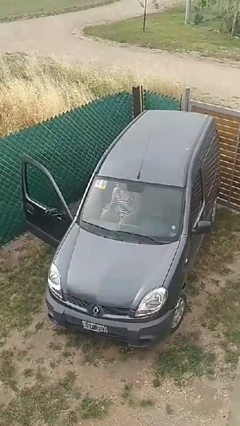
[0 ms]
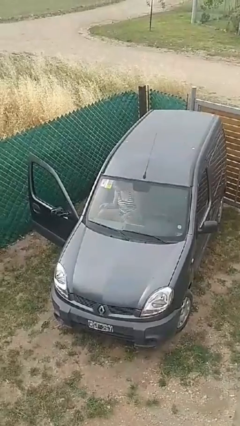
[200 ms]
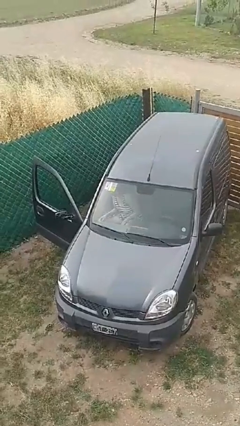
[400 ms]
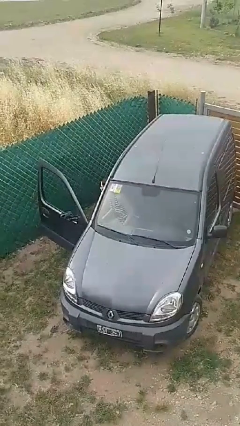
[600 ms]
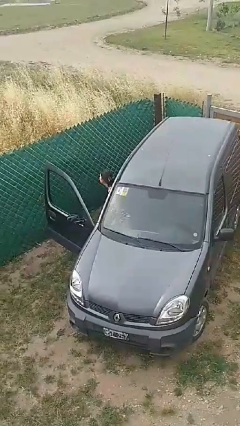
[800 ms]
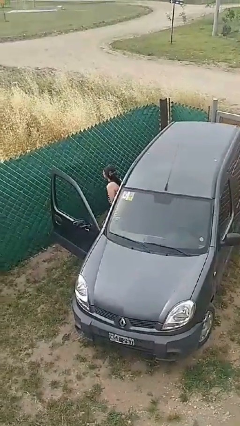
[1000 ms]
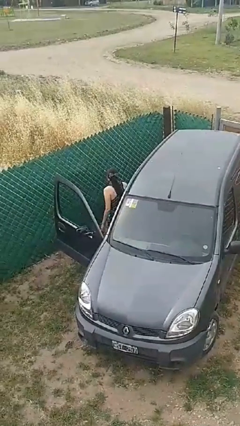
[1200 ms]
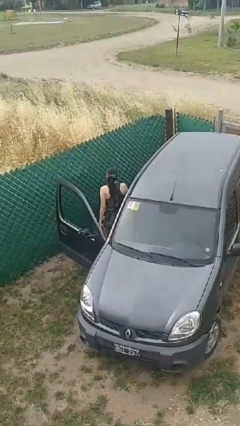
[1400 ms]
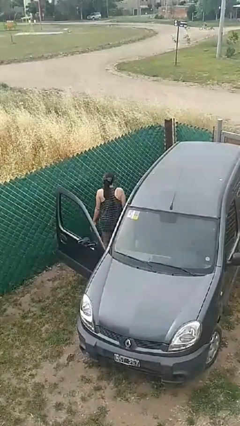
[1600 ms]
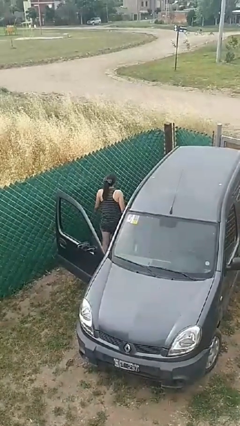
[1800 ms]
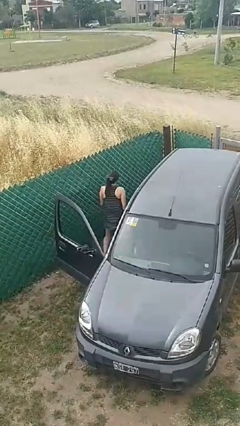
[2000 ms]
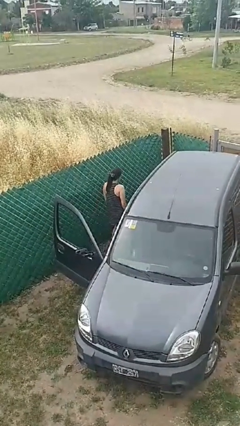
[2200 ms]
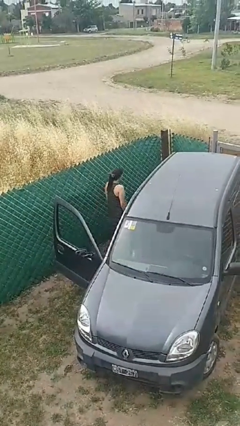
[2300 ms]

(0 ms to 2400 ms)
person exits car

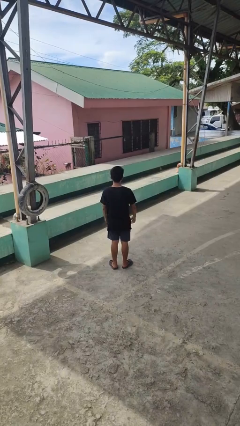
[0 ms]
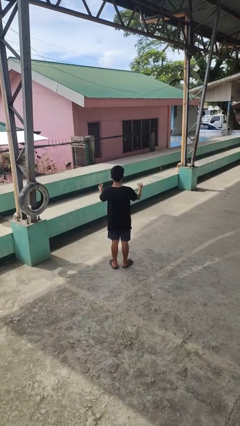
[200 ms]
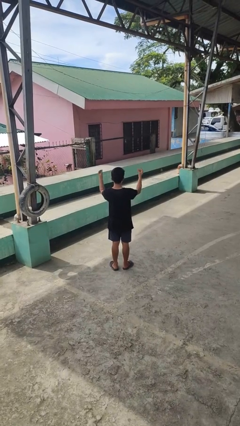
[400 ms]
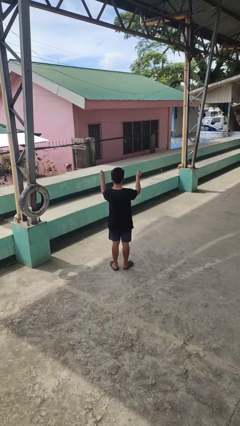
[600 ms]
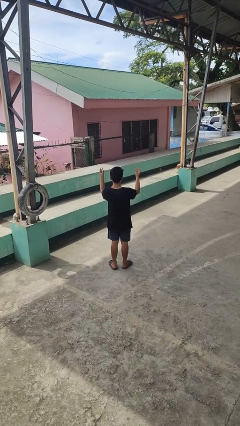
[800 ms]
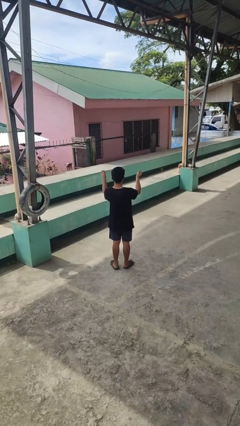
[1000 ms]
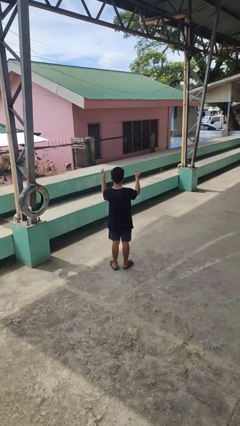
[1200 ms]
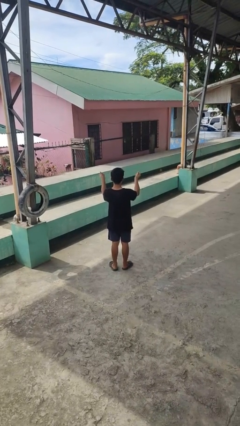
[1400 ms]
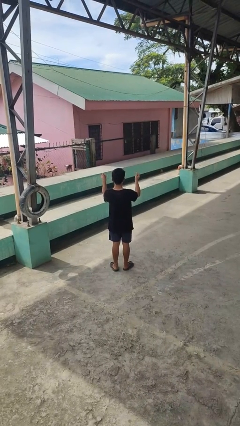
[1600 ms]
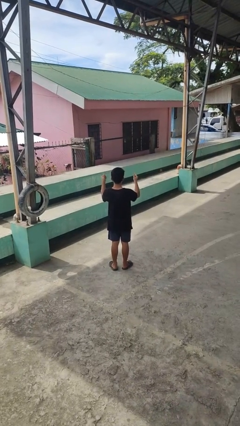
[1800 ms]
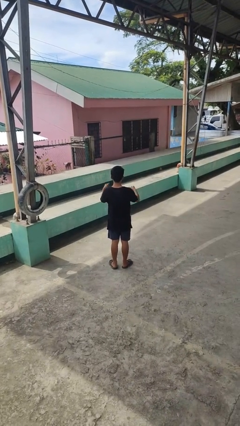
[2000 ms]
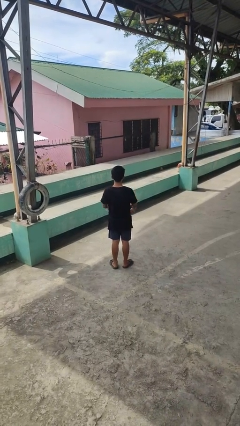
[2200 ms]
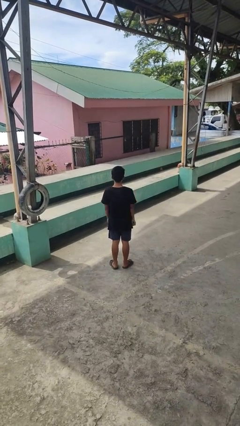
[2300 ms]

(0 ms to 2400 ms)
person snaps fingers

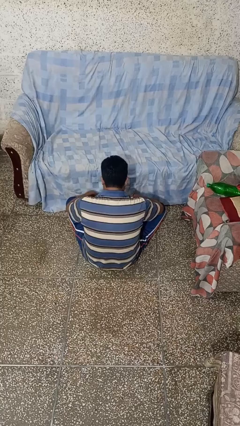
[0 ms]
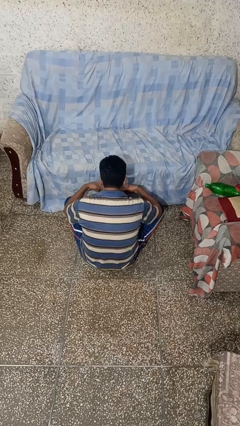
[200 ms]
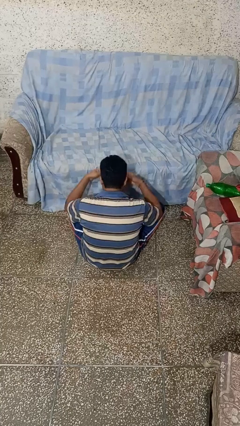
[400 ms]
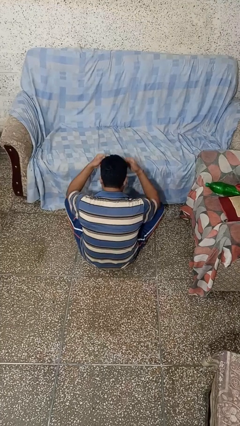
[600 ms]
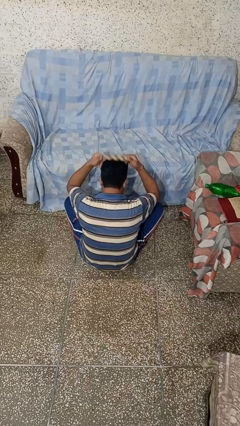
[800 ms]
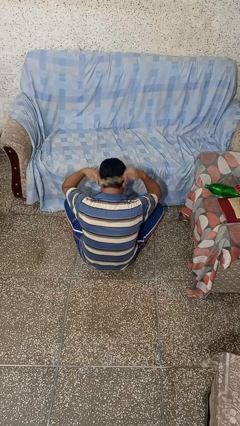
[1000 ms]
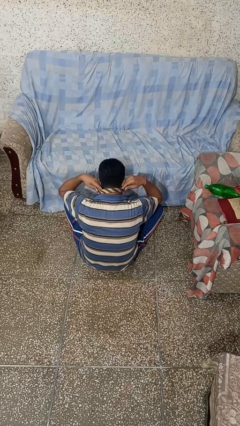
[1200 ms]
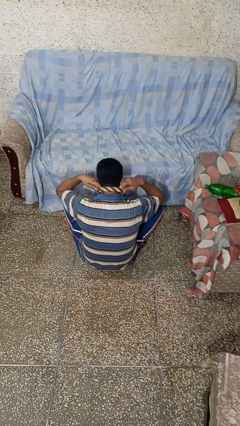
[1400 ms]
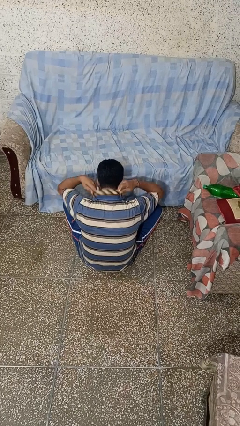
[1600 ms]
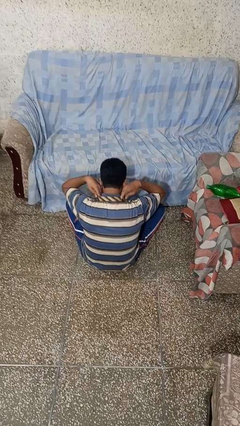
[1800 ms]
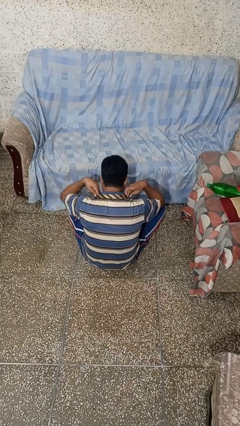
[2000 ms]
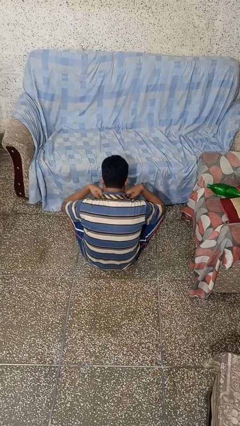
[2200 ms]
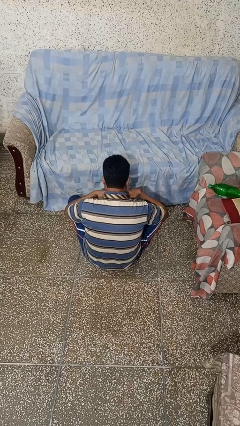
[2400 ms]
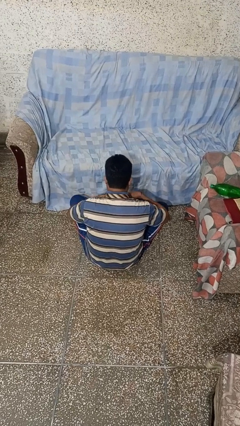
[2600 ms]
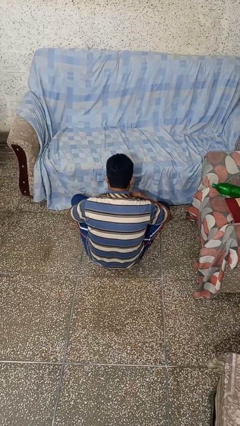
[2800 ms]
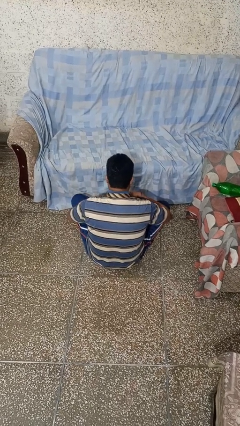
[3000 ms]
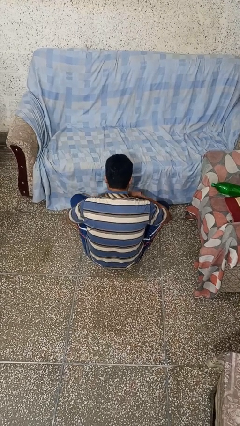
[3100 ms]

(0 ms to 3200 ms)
person puts on necktie

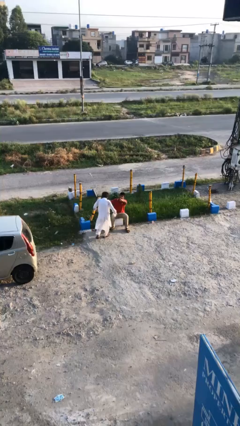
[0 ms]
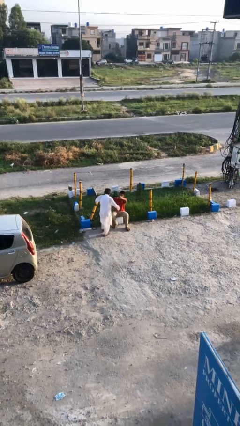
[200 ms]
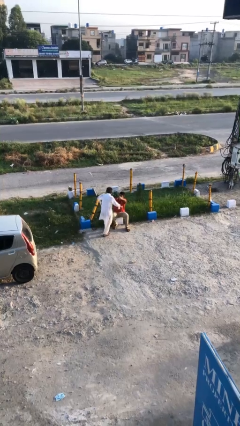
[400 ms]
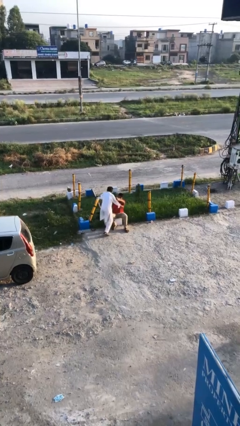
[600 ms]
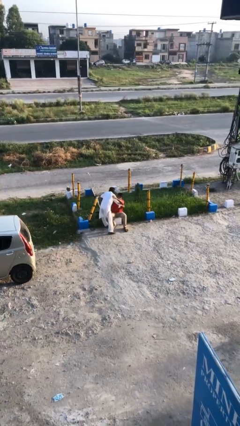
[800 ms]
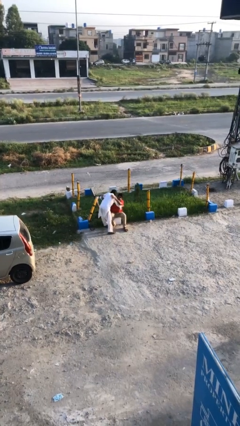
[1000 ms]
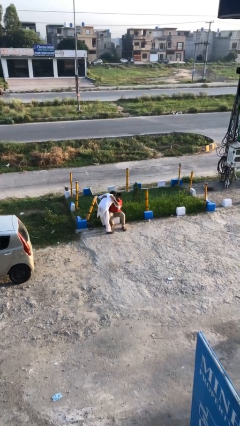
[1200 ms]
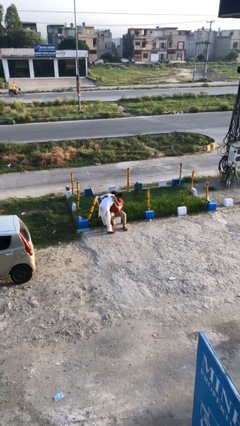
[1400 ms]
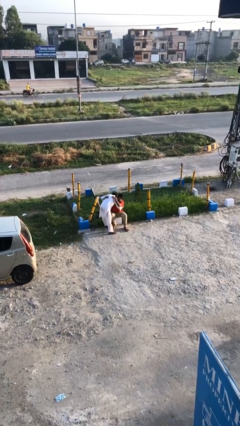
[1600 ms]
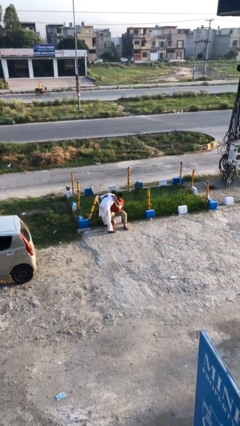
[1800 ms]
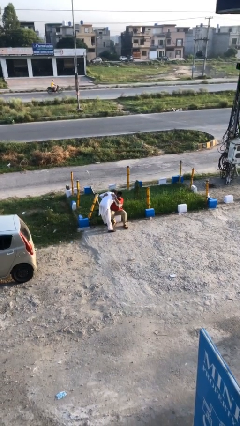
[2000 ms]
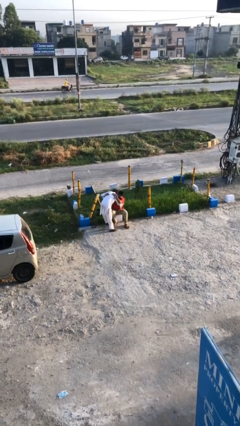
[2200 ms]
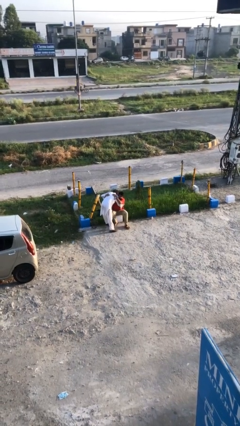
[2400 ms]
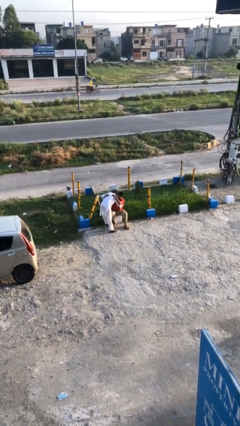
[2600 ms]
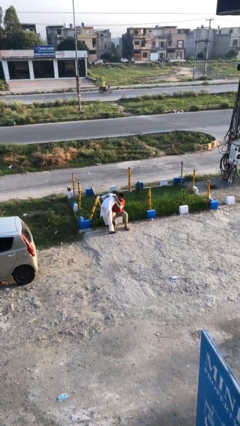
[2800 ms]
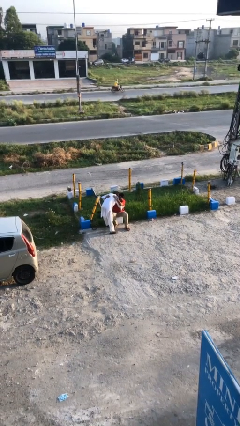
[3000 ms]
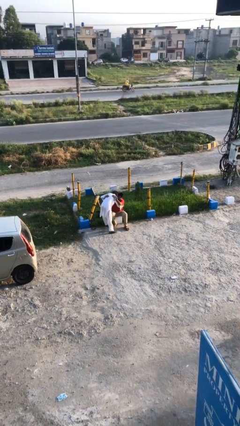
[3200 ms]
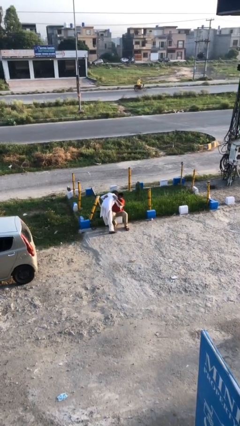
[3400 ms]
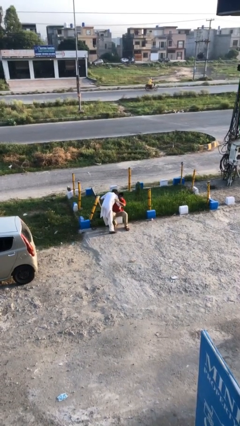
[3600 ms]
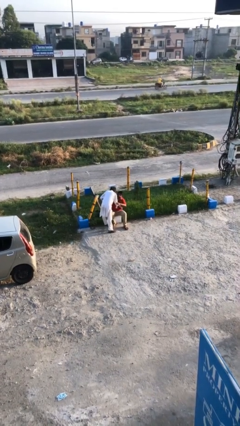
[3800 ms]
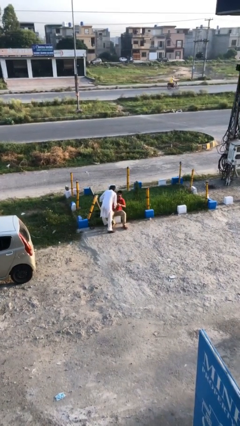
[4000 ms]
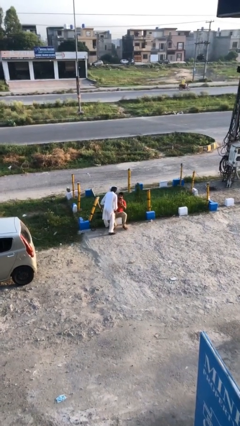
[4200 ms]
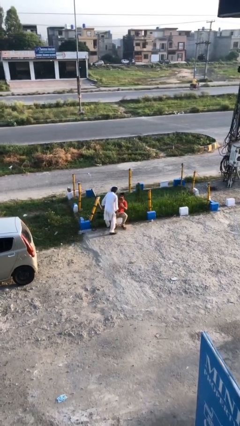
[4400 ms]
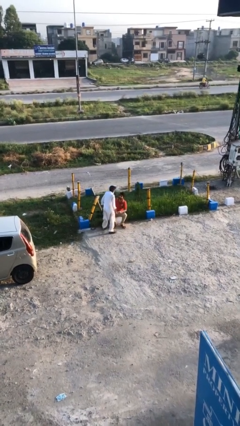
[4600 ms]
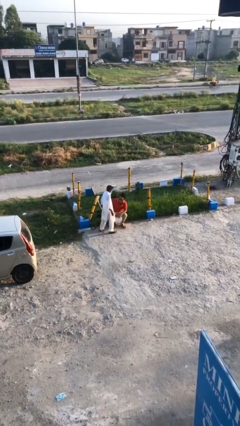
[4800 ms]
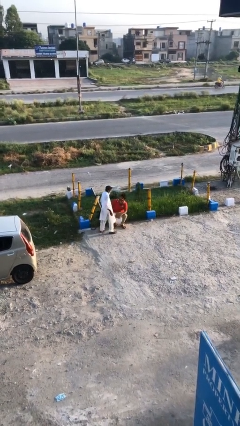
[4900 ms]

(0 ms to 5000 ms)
person embraces person

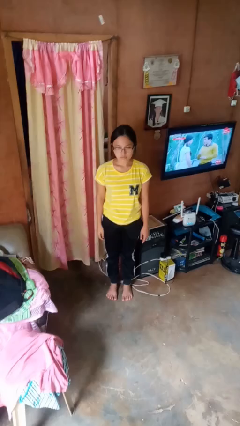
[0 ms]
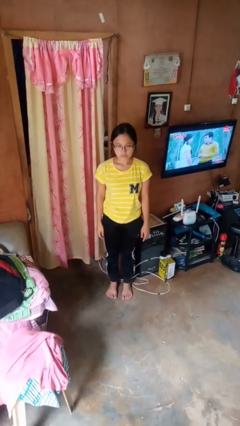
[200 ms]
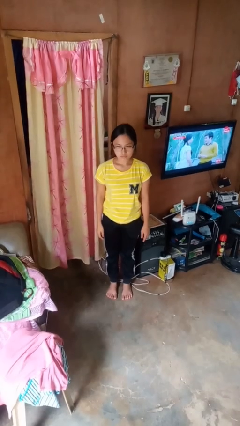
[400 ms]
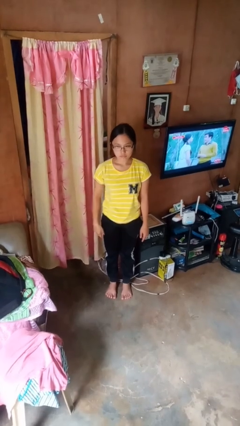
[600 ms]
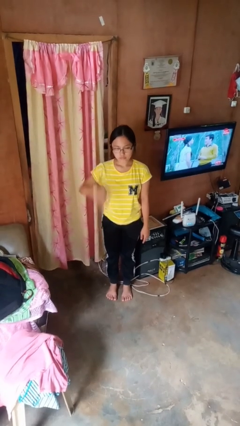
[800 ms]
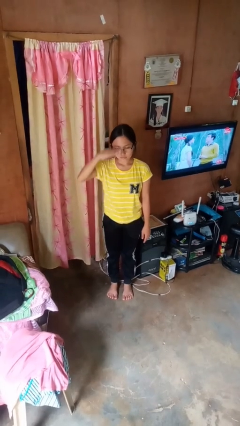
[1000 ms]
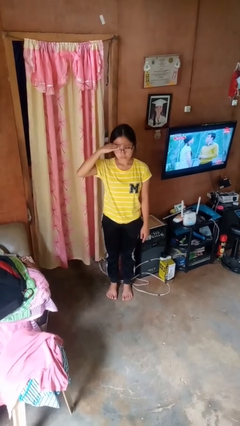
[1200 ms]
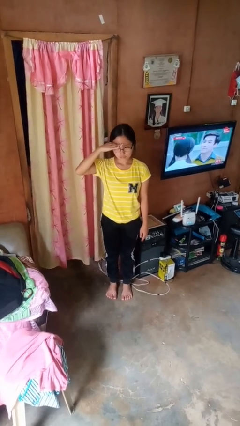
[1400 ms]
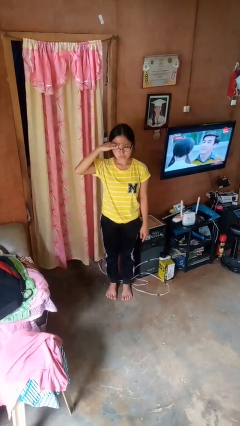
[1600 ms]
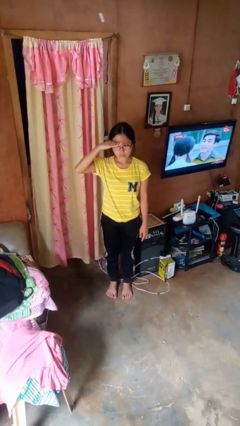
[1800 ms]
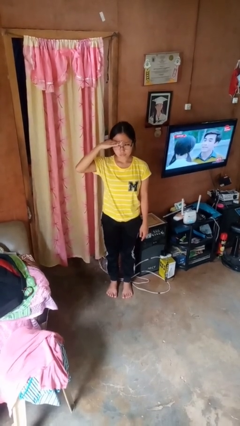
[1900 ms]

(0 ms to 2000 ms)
person salutes

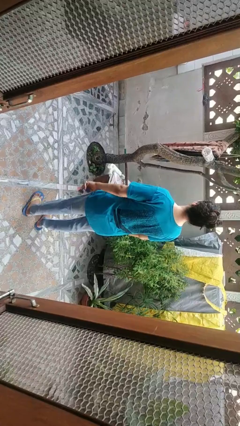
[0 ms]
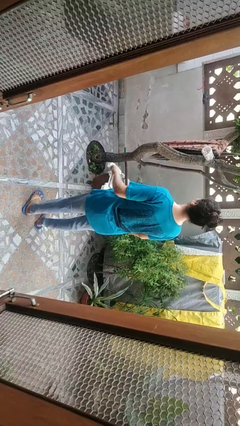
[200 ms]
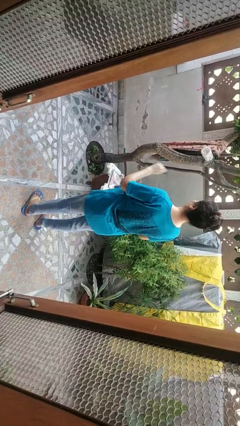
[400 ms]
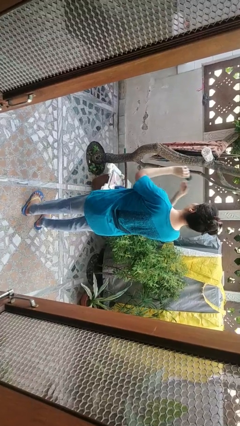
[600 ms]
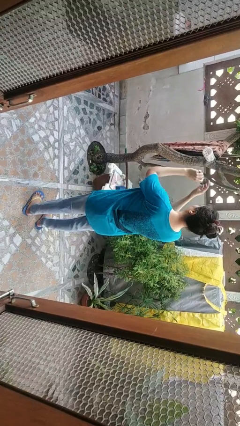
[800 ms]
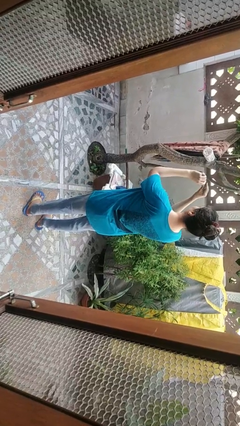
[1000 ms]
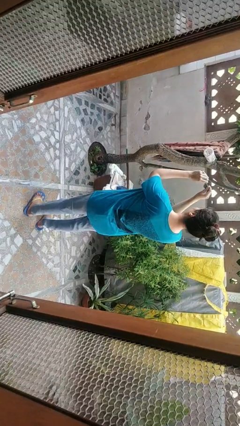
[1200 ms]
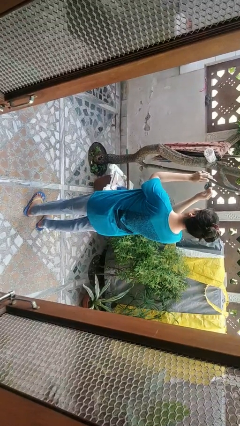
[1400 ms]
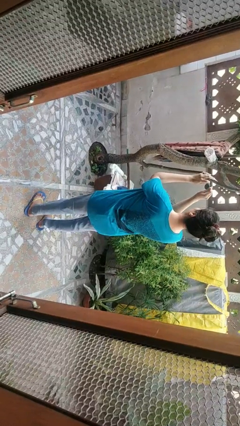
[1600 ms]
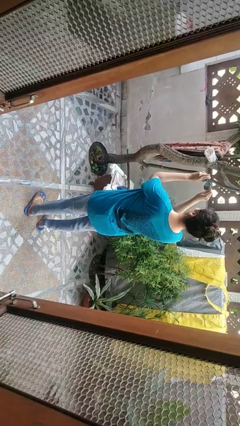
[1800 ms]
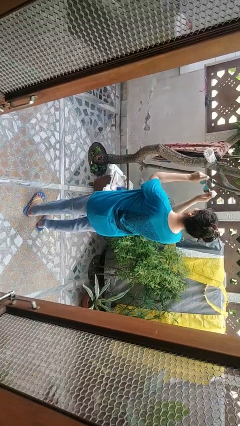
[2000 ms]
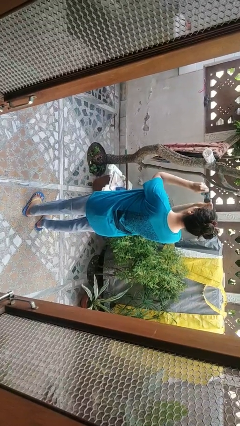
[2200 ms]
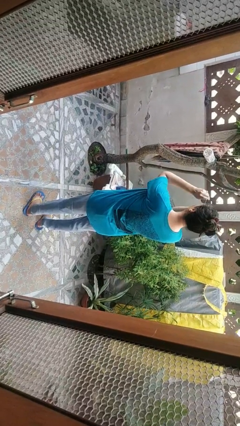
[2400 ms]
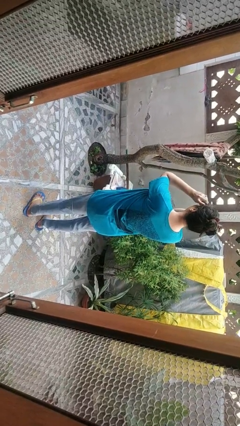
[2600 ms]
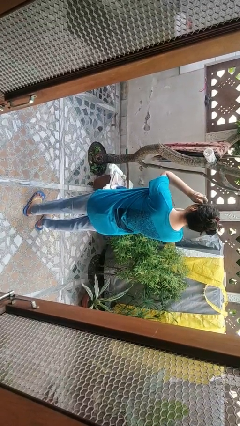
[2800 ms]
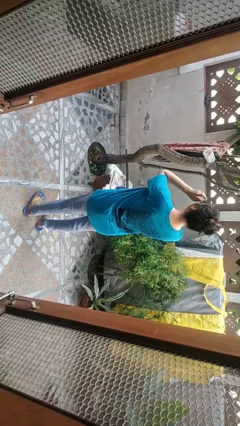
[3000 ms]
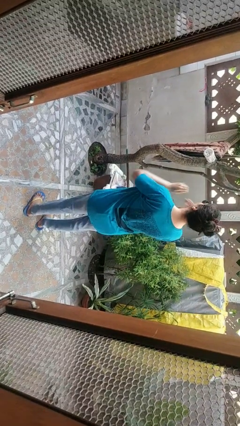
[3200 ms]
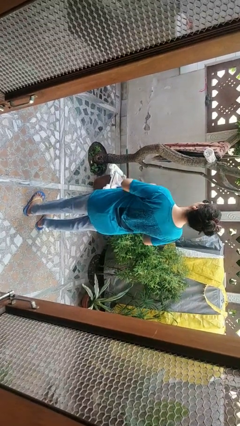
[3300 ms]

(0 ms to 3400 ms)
person puts on sunglasses
